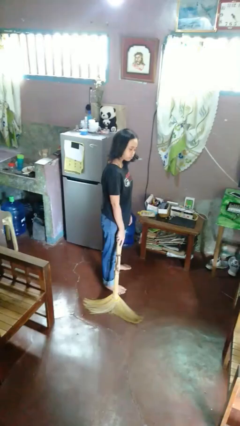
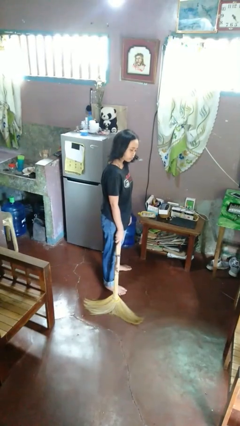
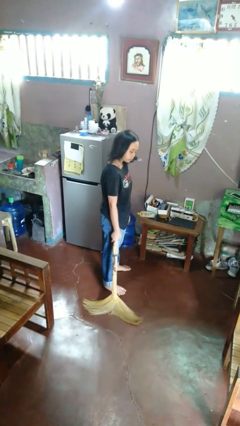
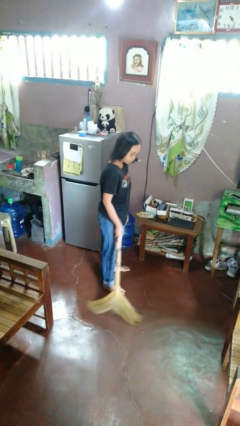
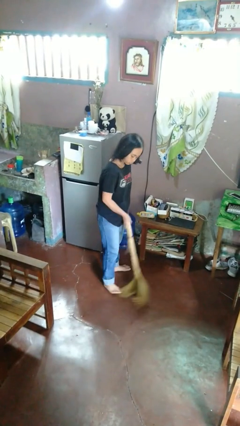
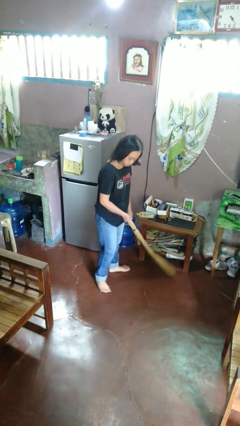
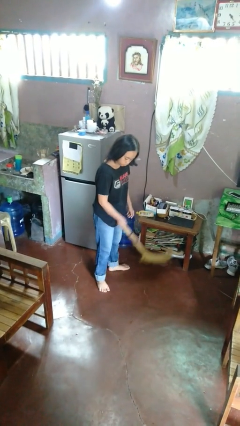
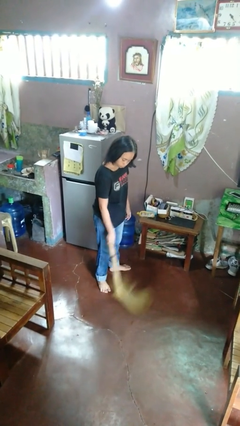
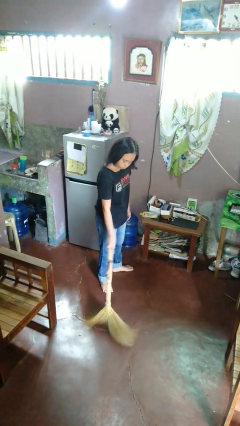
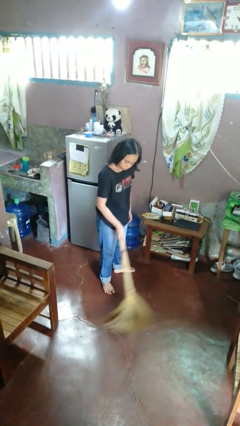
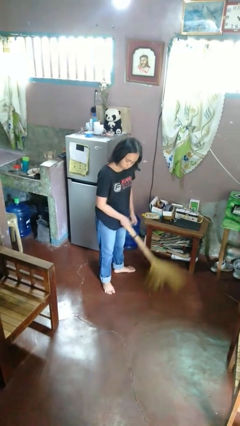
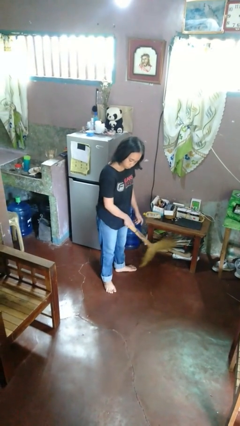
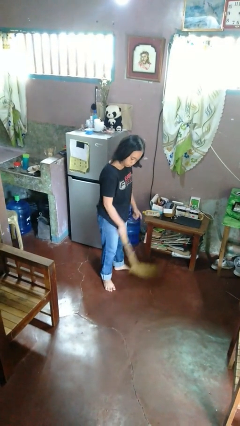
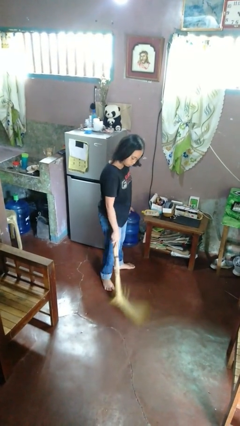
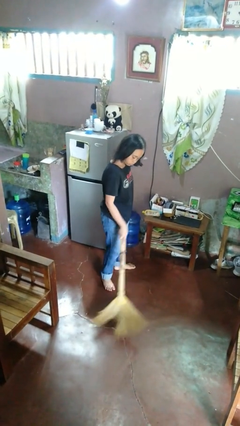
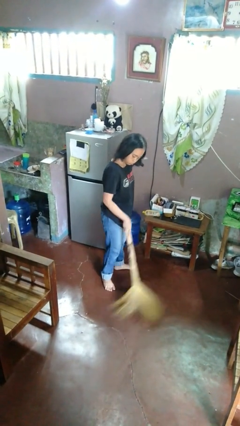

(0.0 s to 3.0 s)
person sweeps floor

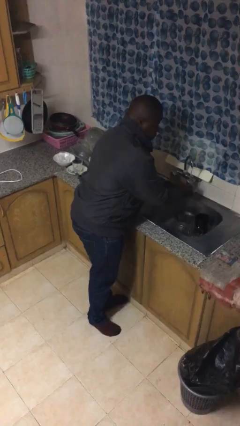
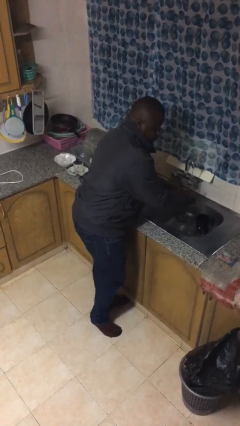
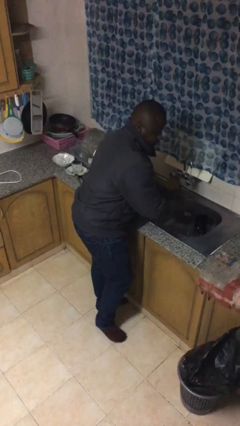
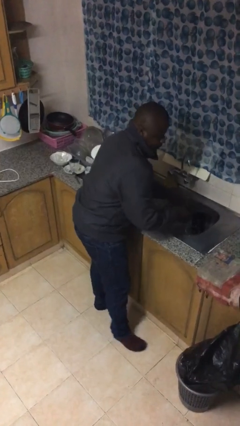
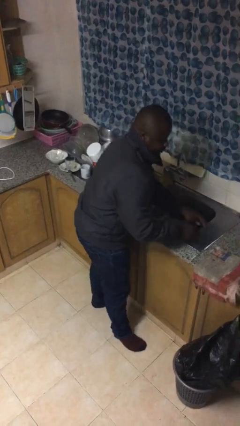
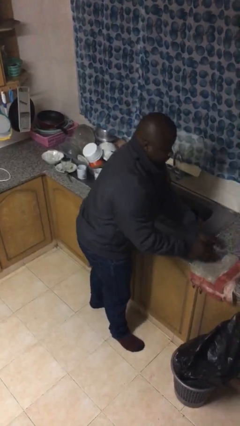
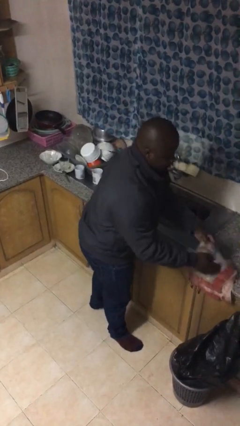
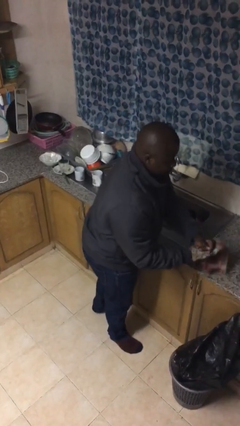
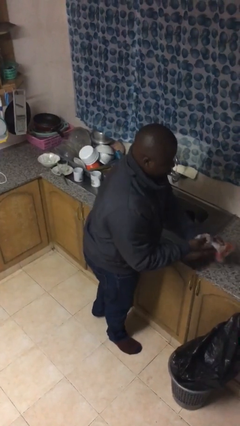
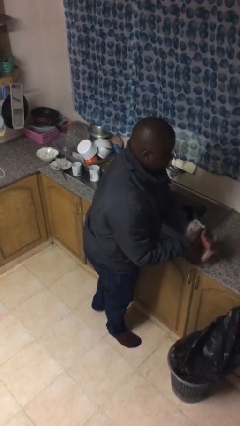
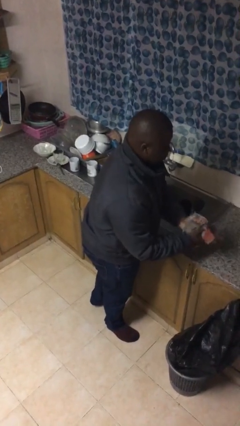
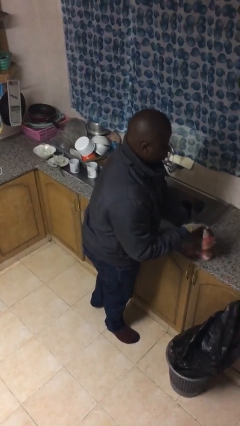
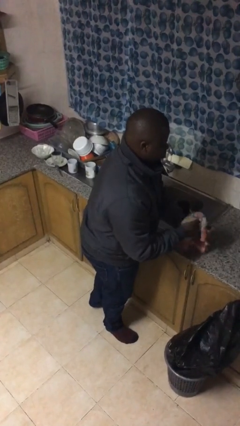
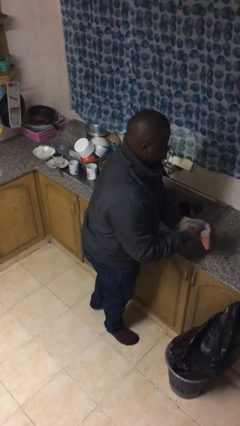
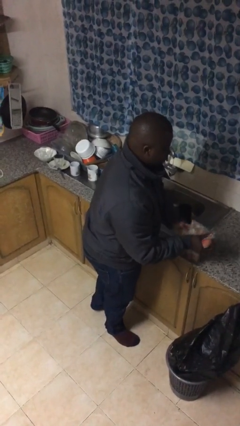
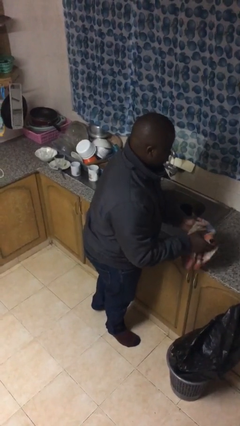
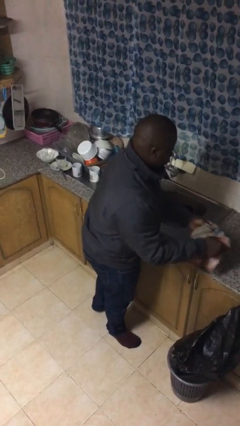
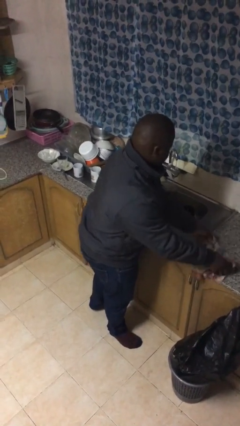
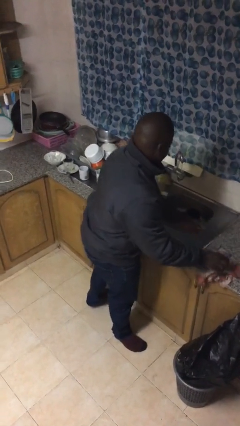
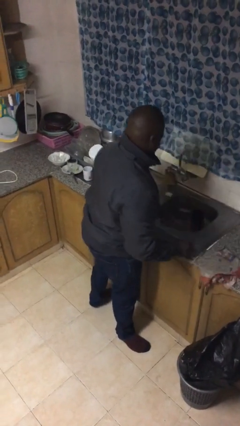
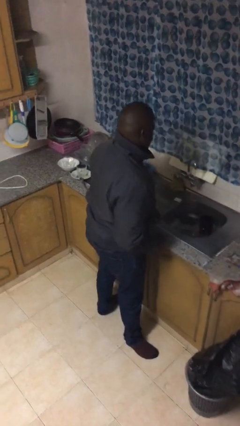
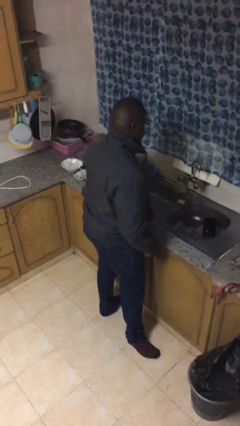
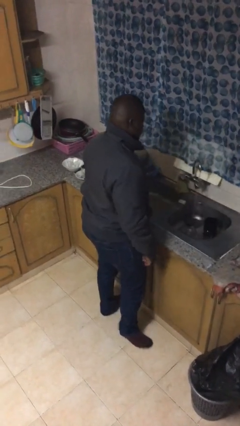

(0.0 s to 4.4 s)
person dries hands with towel

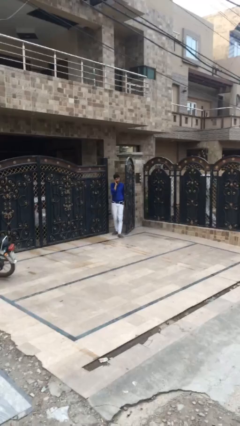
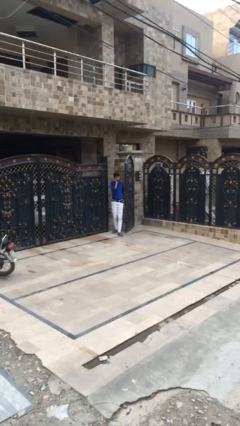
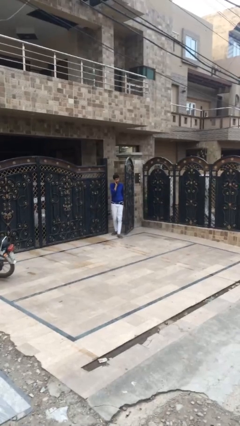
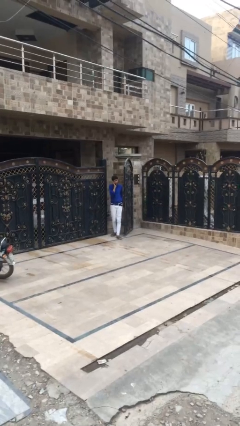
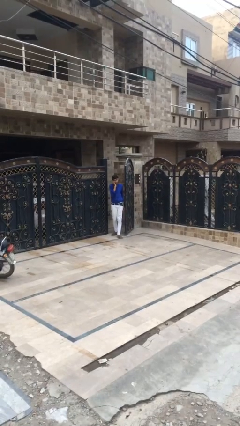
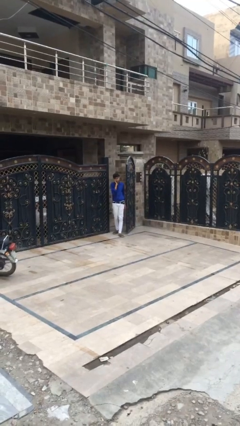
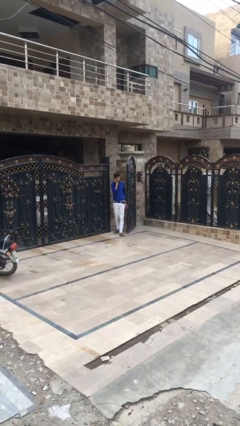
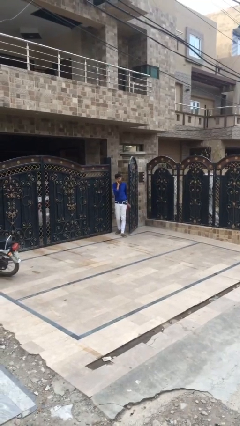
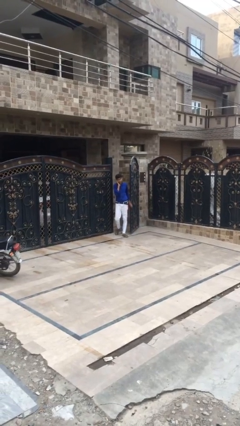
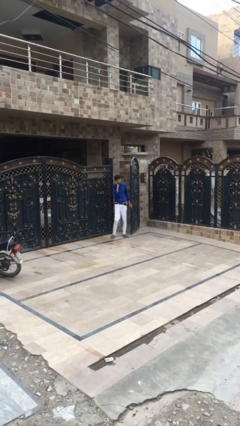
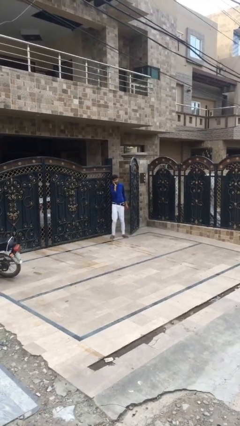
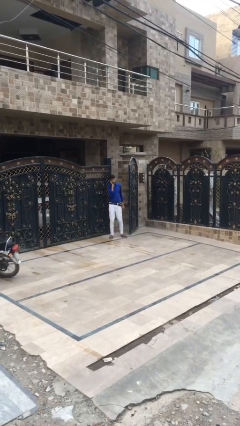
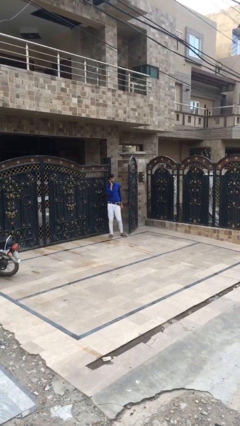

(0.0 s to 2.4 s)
person enters scene through structure

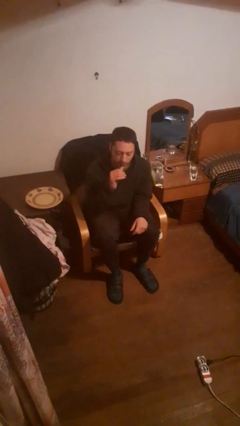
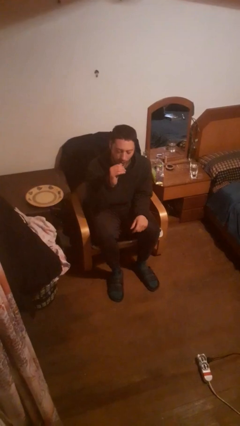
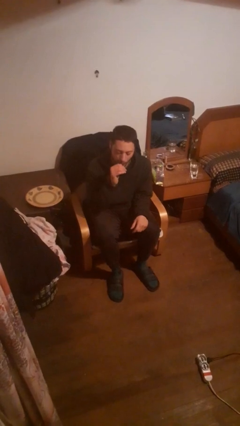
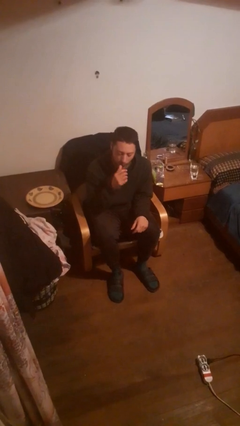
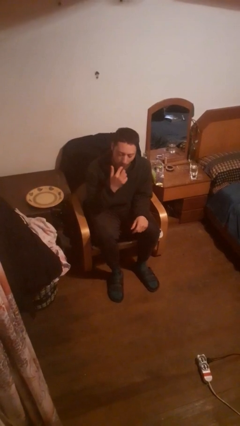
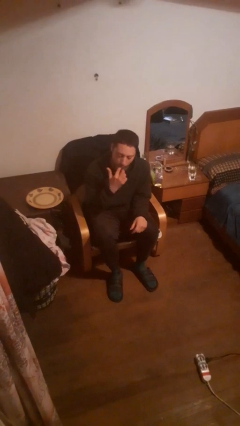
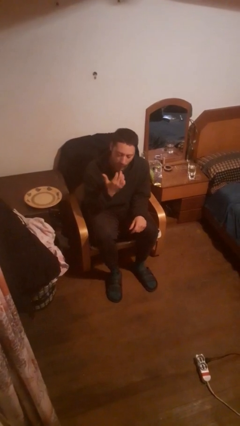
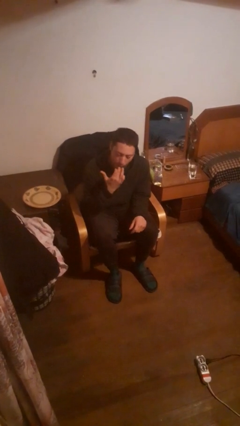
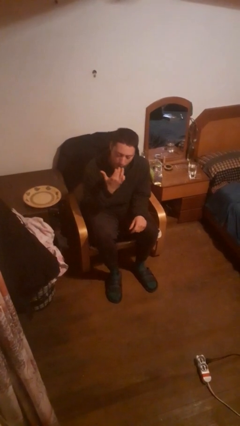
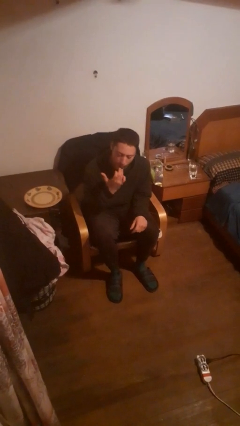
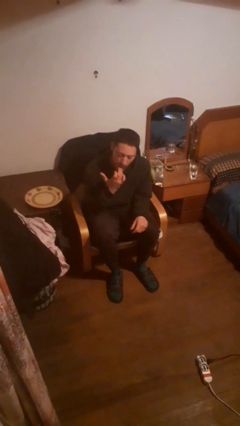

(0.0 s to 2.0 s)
person licks fingers

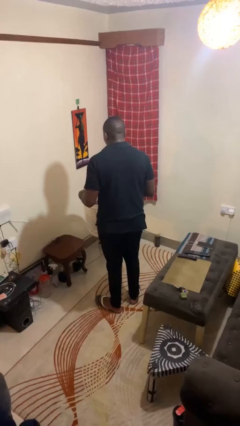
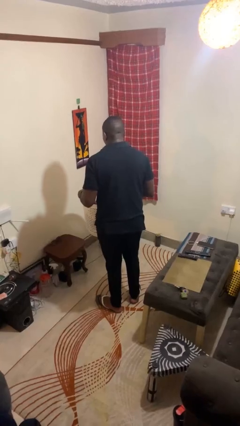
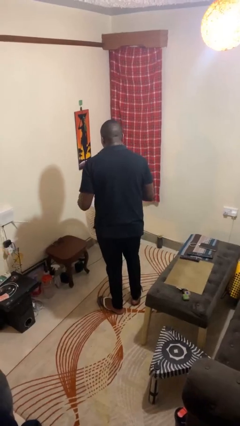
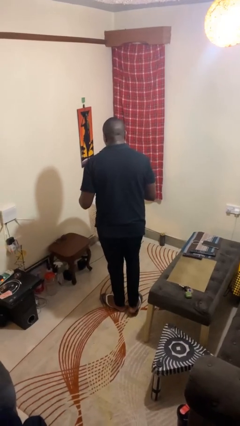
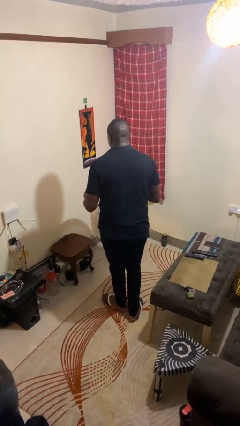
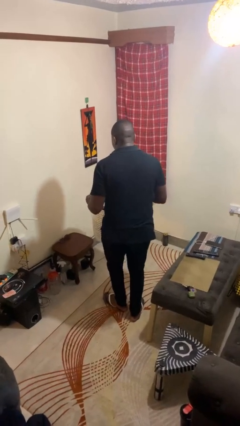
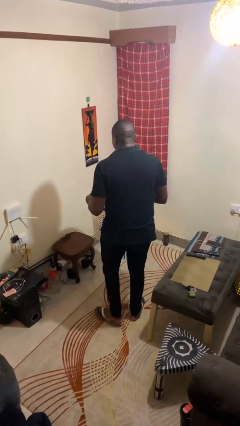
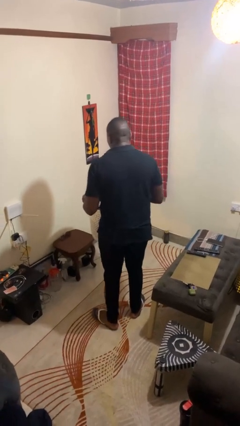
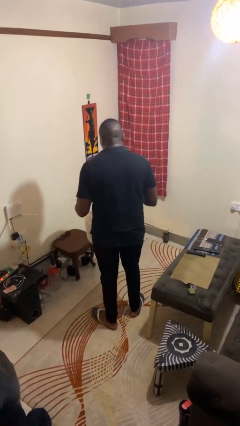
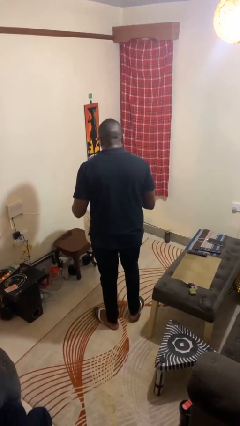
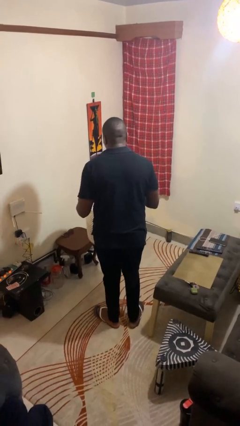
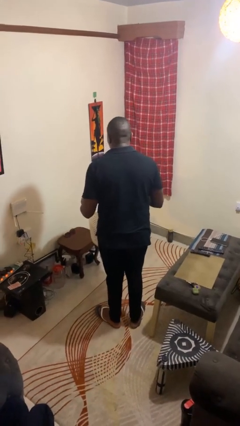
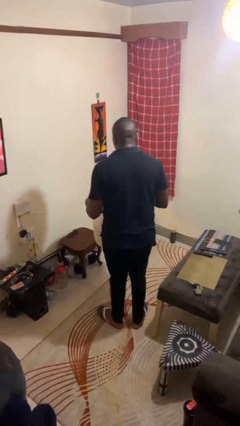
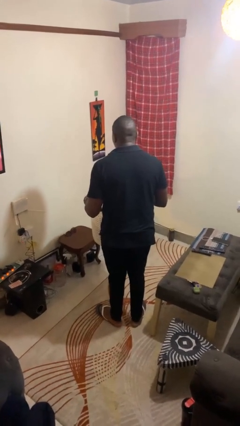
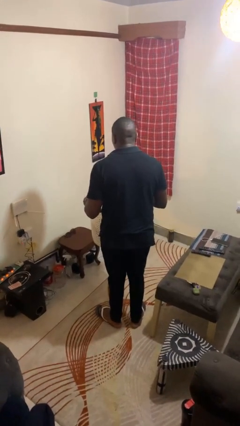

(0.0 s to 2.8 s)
person carries laundry basket

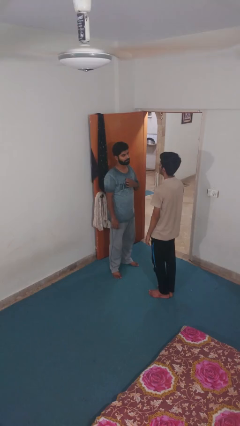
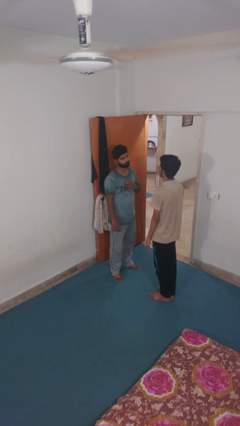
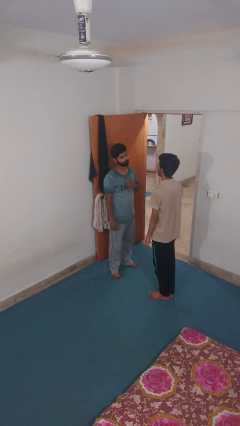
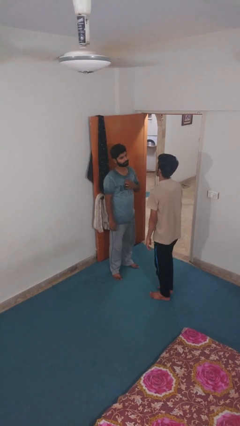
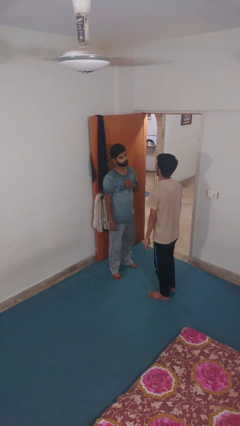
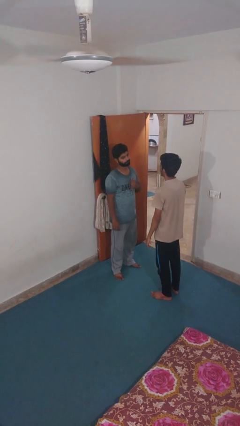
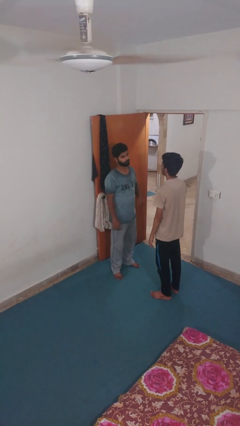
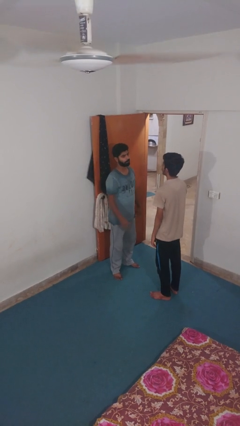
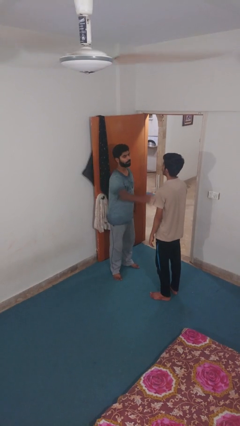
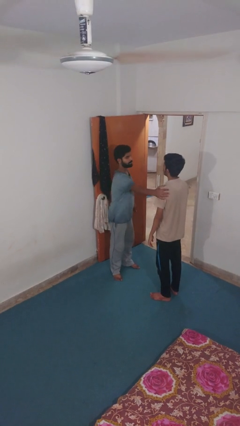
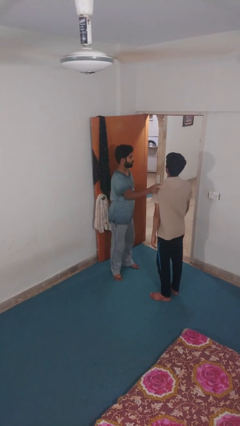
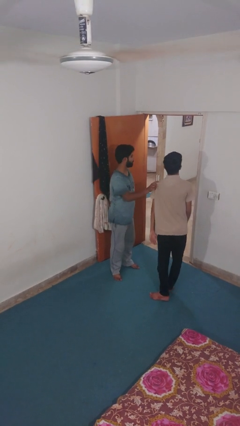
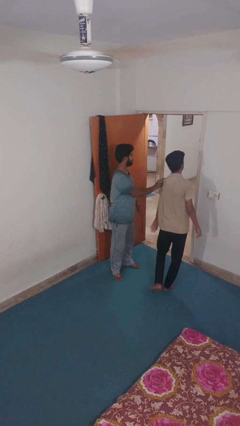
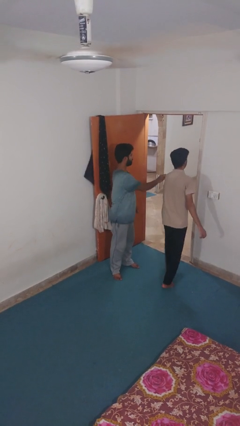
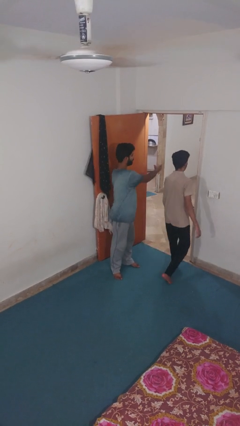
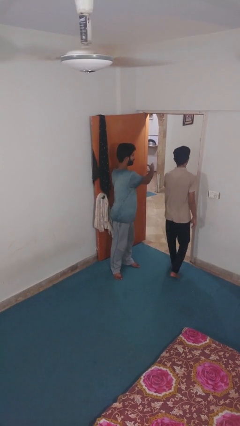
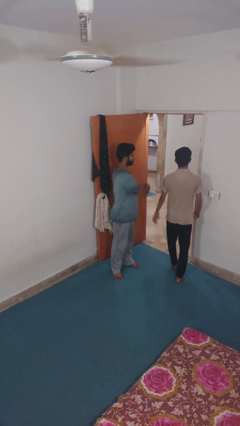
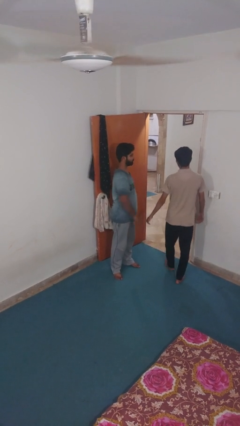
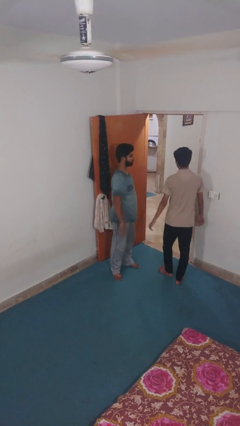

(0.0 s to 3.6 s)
person shoves person
